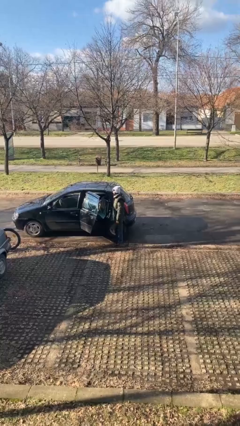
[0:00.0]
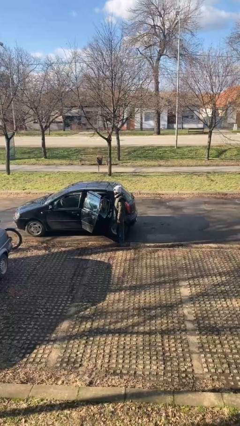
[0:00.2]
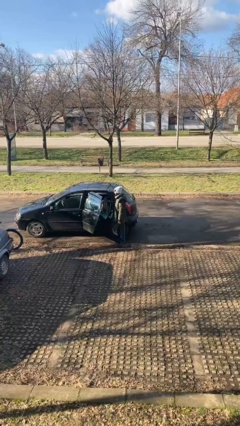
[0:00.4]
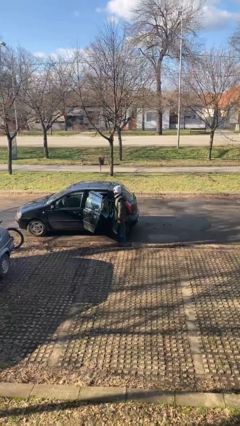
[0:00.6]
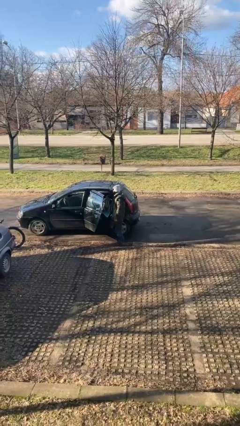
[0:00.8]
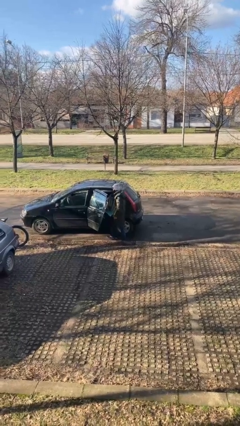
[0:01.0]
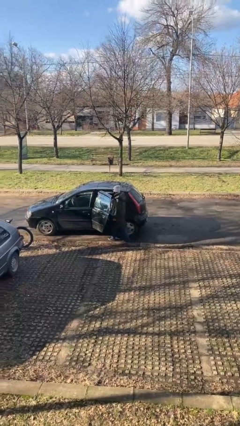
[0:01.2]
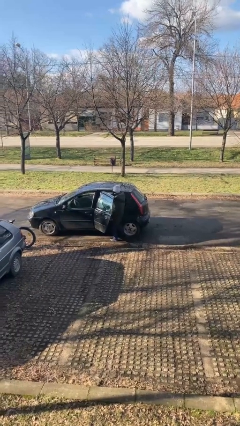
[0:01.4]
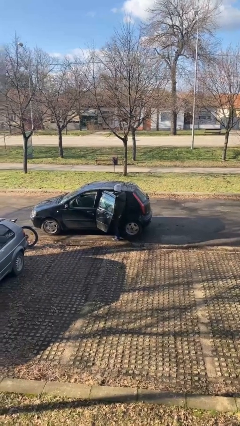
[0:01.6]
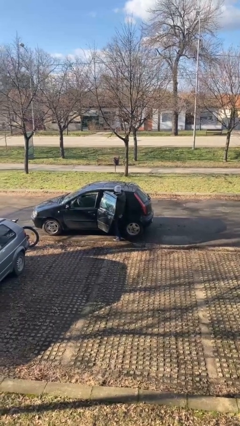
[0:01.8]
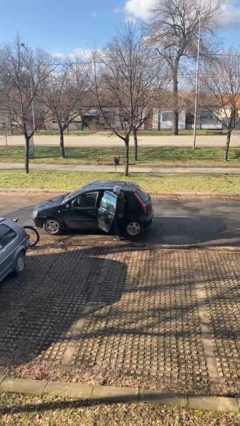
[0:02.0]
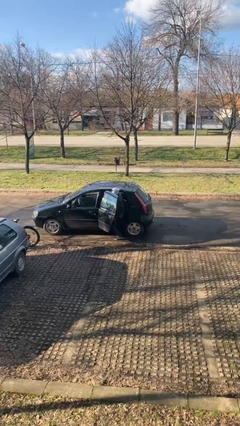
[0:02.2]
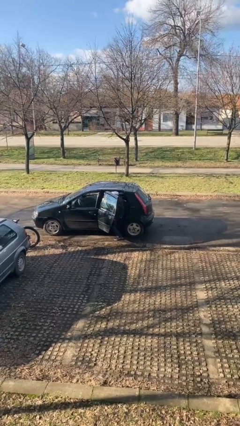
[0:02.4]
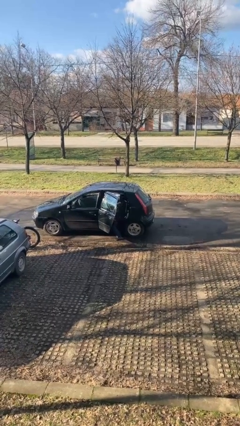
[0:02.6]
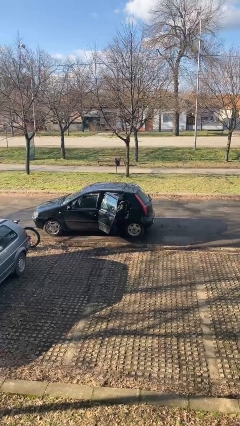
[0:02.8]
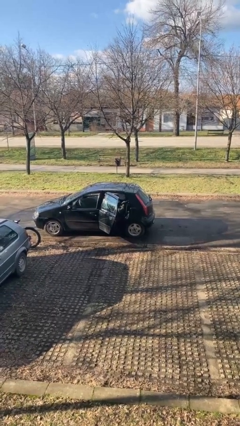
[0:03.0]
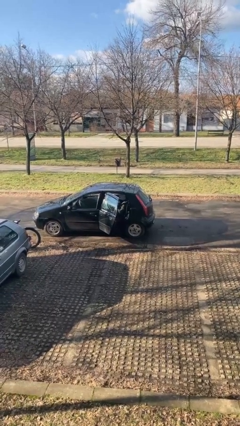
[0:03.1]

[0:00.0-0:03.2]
person enters car

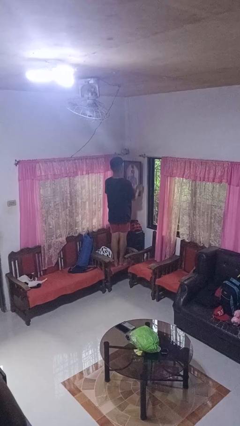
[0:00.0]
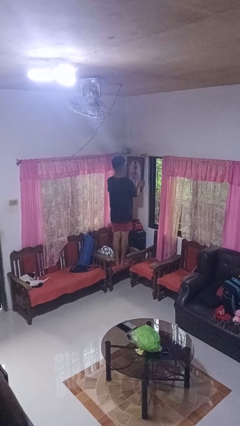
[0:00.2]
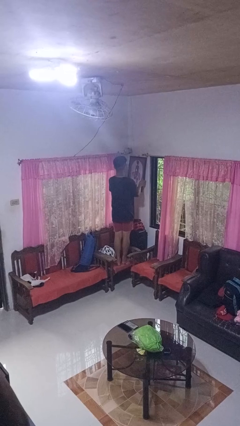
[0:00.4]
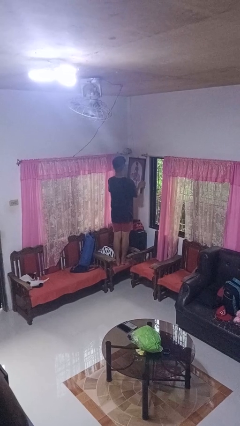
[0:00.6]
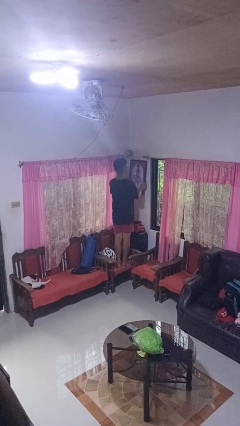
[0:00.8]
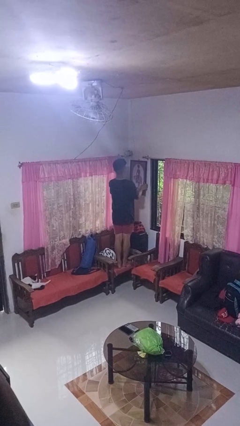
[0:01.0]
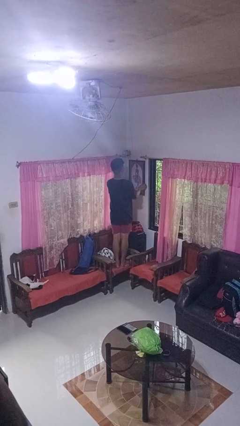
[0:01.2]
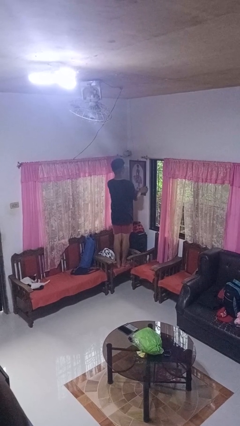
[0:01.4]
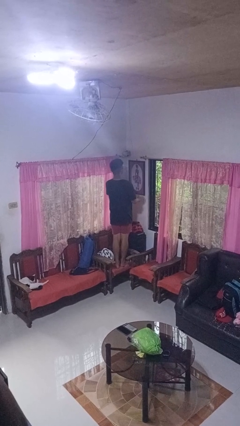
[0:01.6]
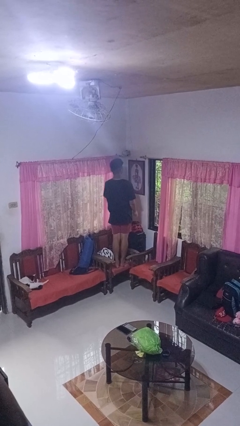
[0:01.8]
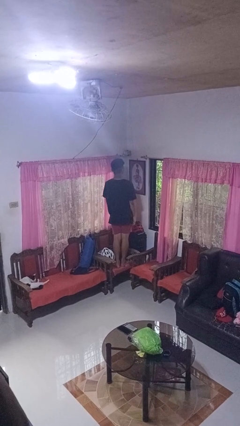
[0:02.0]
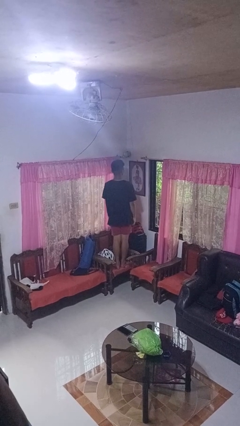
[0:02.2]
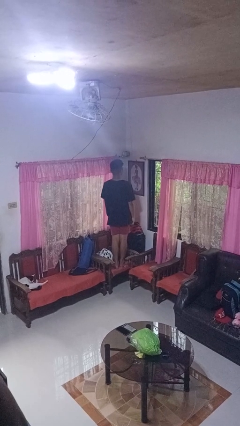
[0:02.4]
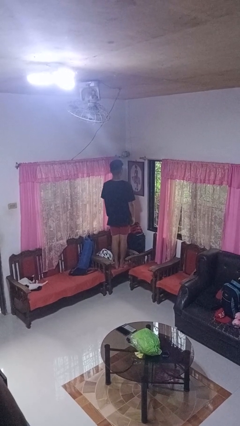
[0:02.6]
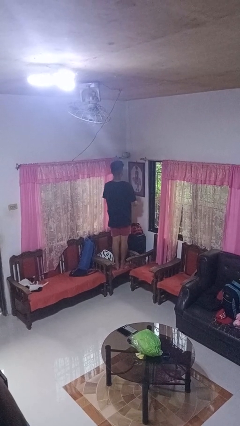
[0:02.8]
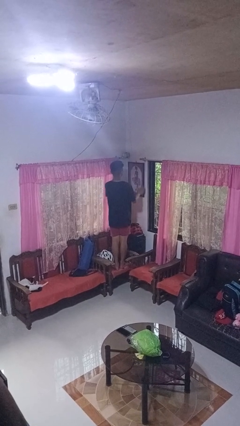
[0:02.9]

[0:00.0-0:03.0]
person puts up picture frame

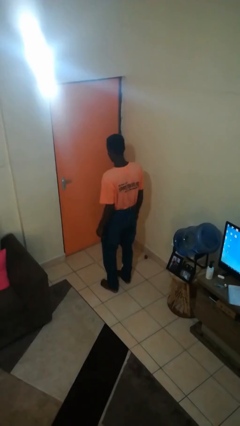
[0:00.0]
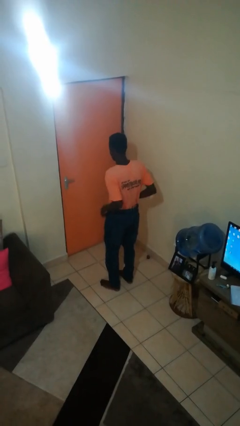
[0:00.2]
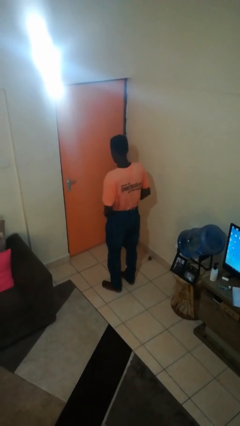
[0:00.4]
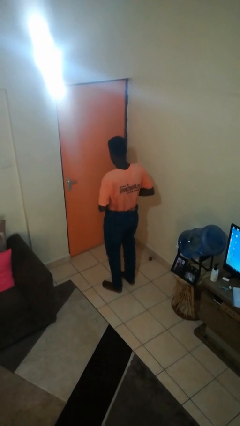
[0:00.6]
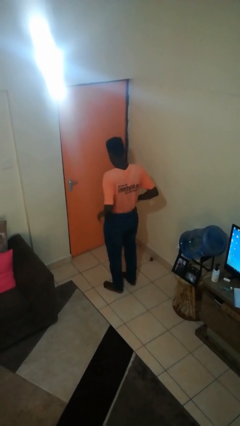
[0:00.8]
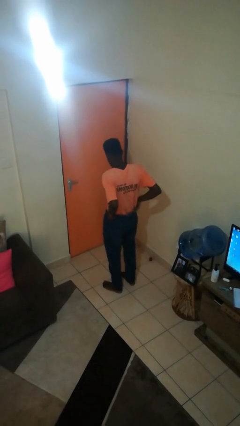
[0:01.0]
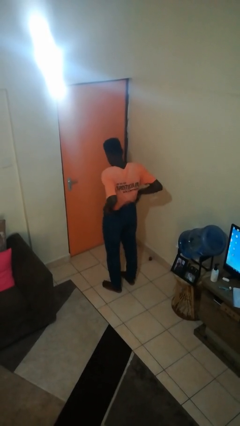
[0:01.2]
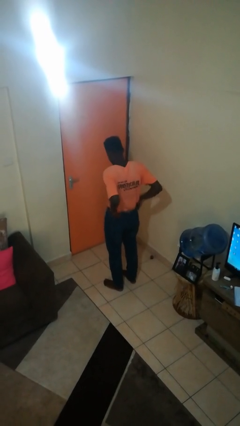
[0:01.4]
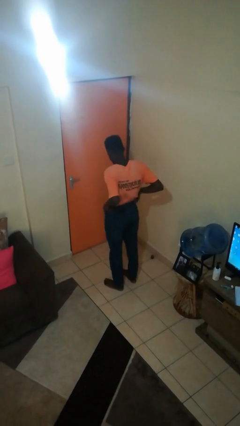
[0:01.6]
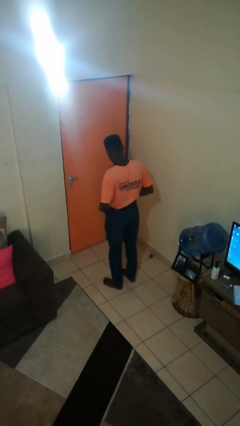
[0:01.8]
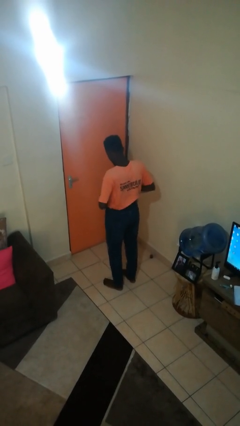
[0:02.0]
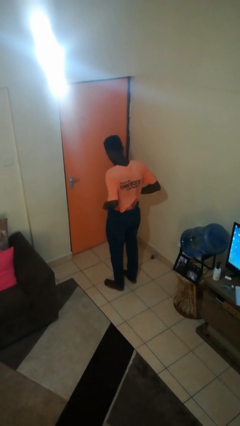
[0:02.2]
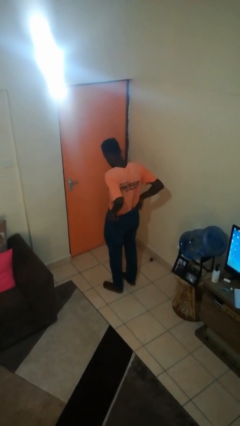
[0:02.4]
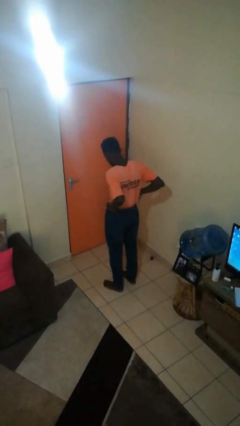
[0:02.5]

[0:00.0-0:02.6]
person hikes up pants

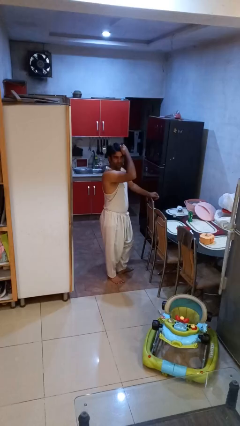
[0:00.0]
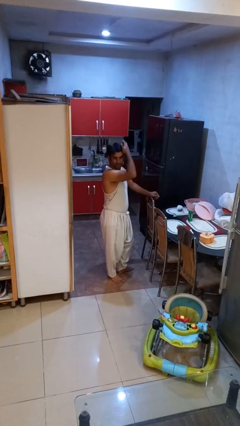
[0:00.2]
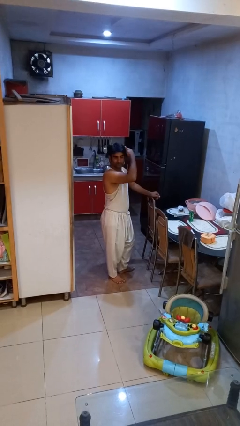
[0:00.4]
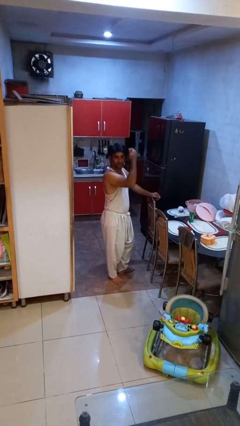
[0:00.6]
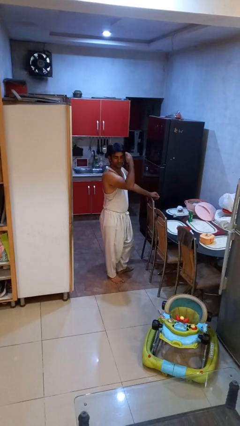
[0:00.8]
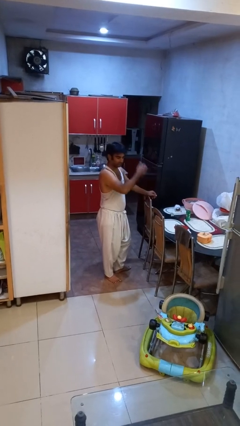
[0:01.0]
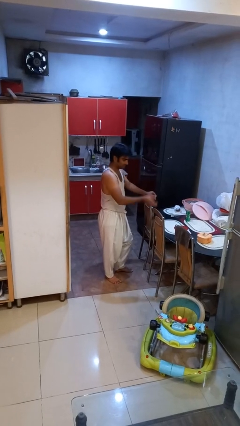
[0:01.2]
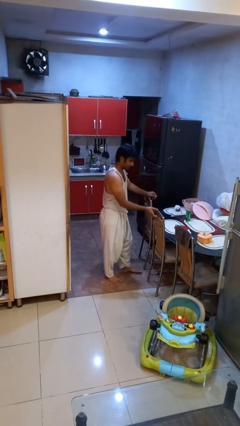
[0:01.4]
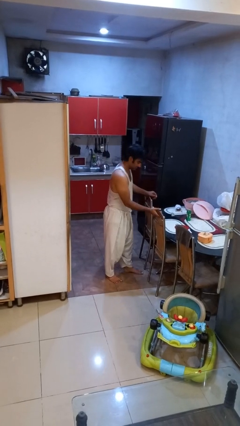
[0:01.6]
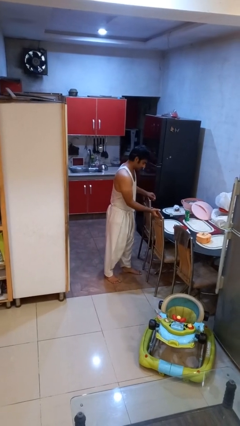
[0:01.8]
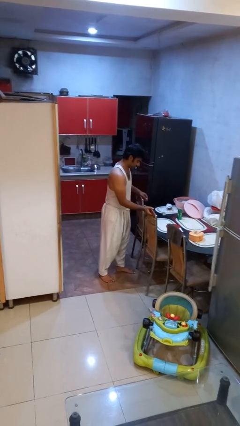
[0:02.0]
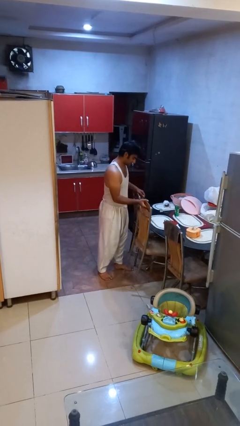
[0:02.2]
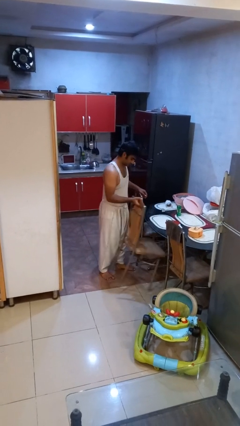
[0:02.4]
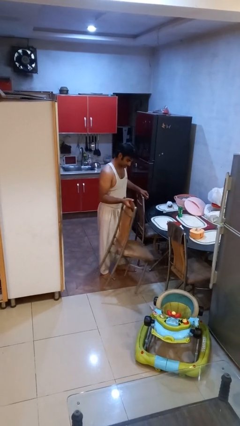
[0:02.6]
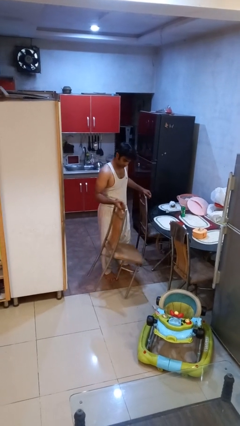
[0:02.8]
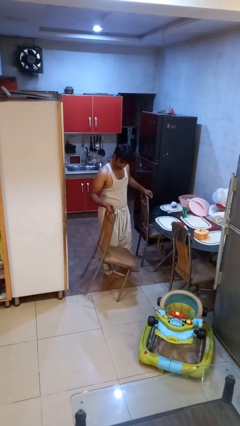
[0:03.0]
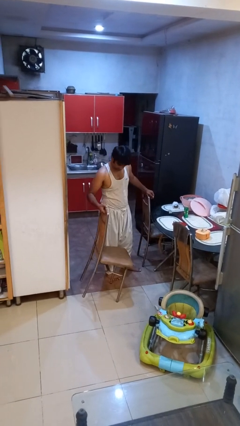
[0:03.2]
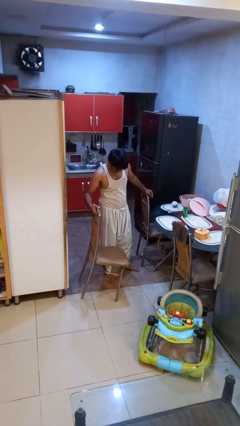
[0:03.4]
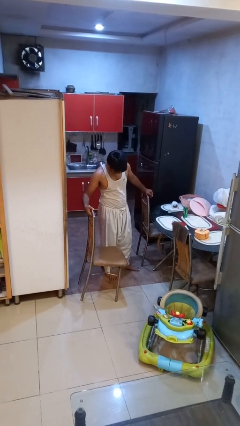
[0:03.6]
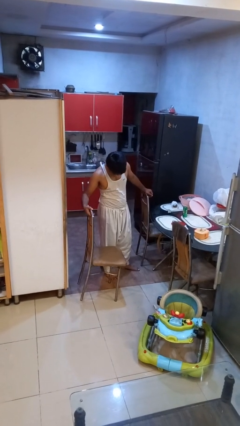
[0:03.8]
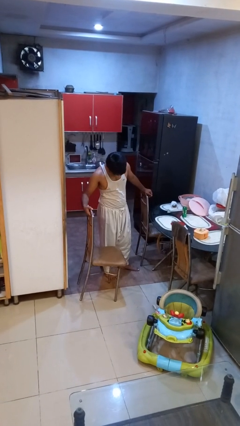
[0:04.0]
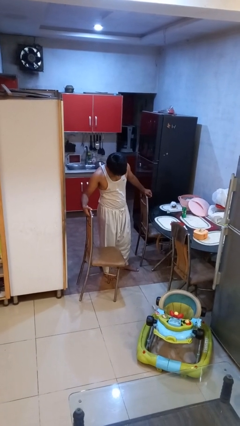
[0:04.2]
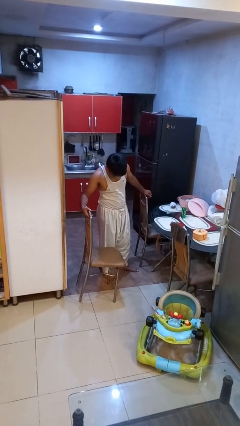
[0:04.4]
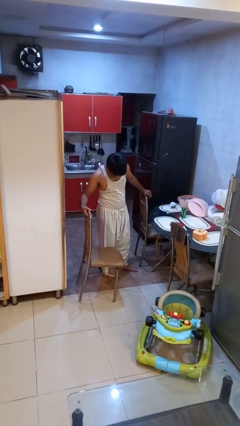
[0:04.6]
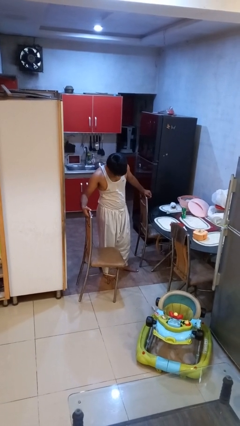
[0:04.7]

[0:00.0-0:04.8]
person pulls out chair

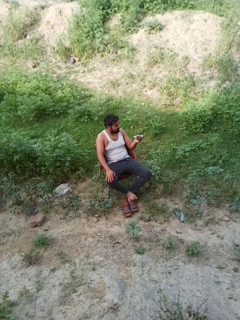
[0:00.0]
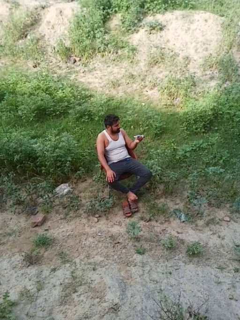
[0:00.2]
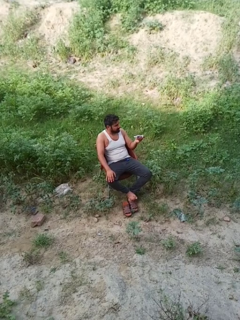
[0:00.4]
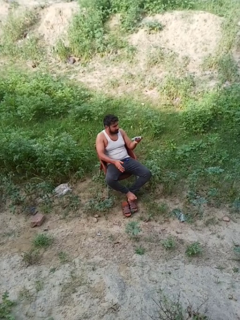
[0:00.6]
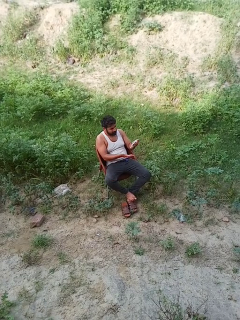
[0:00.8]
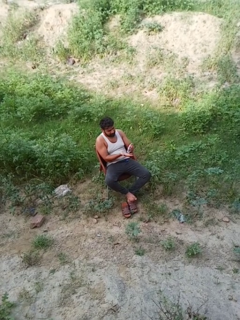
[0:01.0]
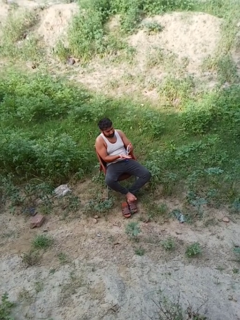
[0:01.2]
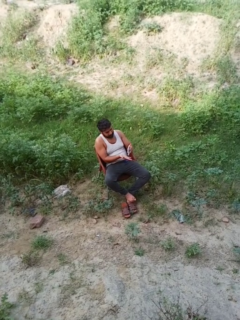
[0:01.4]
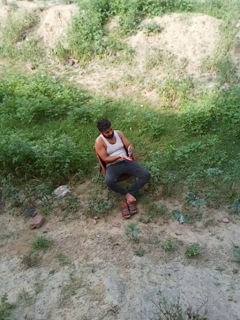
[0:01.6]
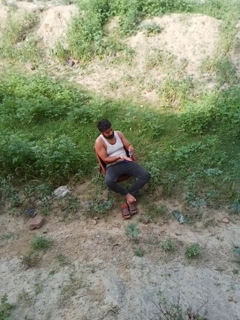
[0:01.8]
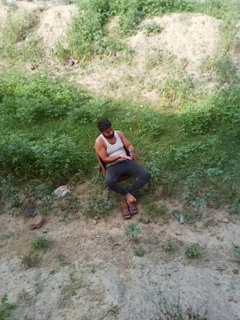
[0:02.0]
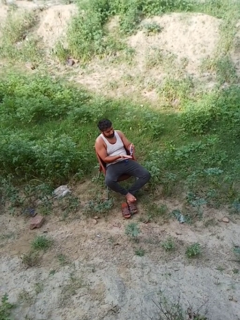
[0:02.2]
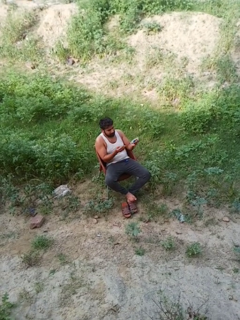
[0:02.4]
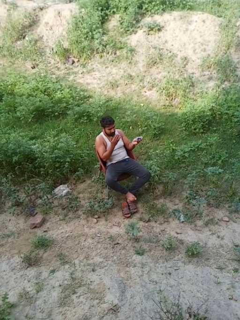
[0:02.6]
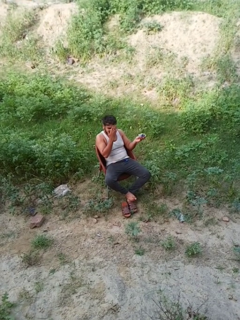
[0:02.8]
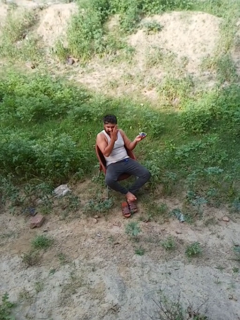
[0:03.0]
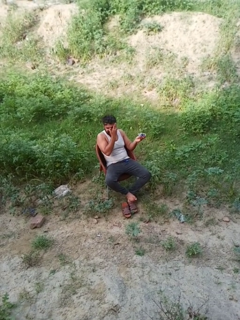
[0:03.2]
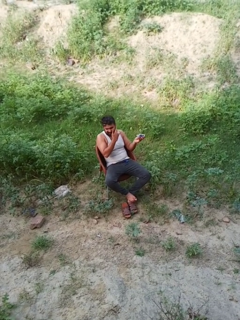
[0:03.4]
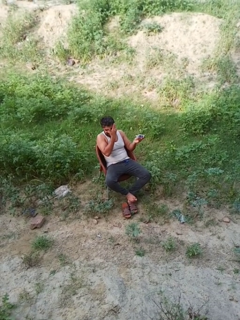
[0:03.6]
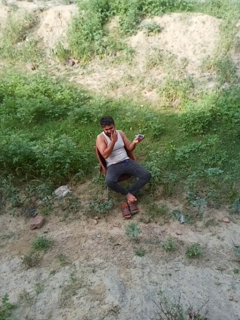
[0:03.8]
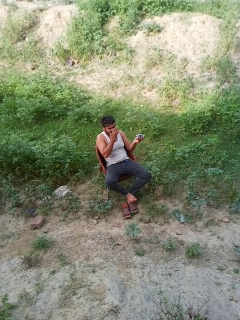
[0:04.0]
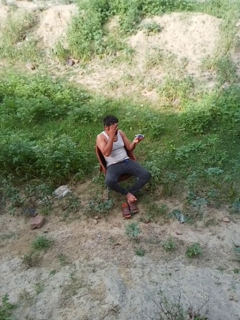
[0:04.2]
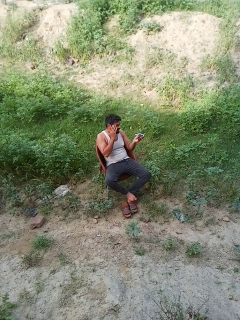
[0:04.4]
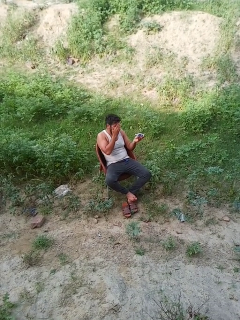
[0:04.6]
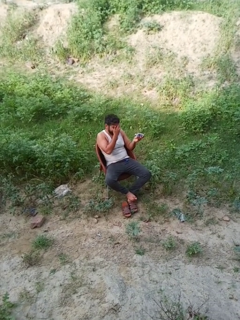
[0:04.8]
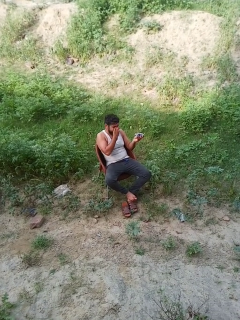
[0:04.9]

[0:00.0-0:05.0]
person applies sunscreen

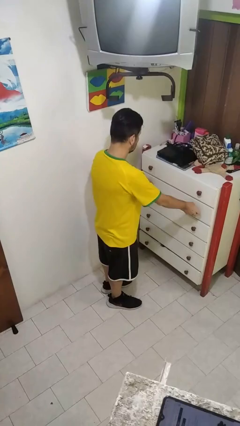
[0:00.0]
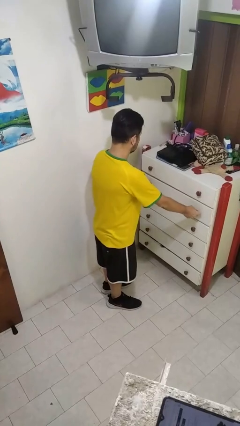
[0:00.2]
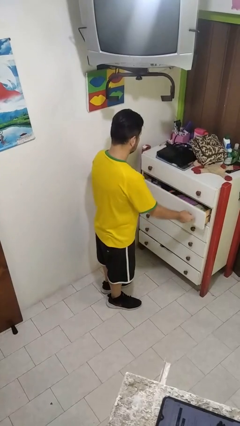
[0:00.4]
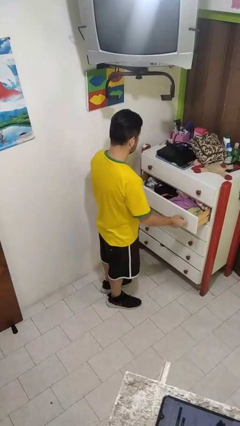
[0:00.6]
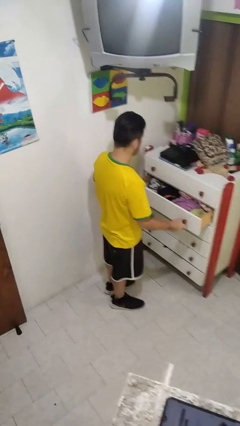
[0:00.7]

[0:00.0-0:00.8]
person opens dresser drawer
